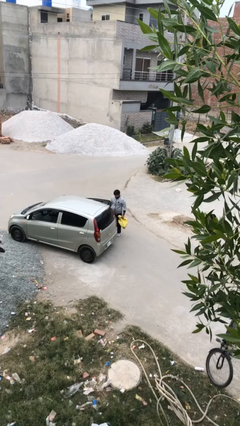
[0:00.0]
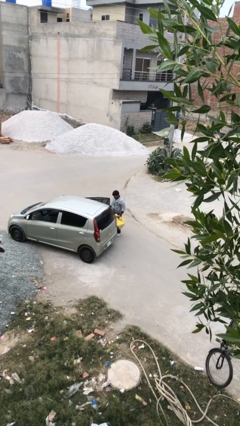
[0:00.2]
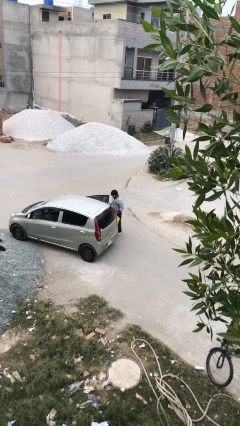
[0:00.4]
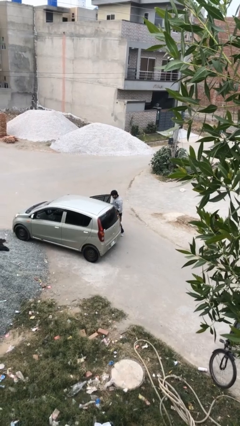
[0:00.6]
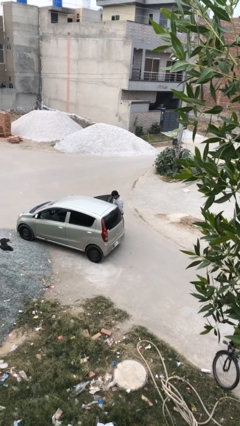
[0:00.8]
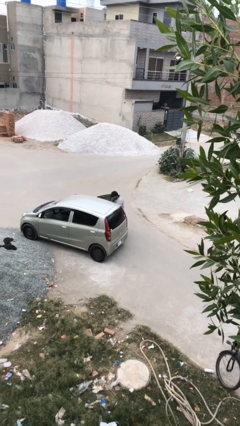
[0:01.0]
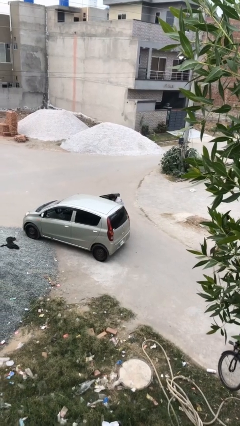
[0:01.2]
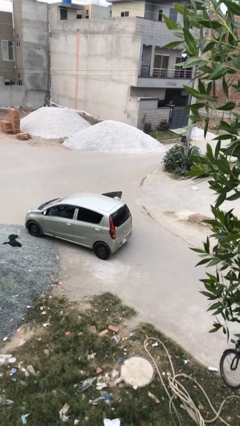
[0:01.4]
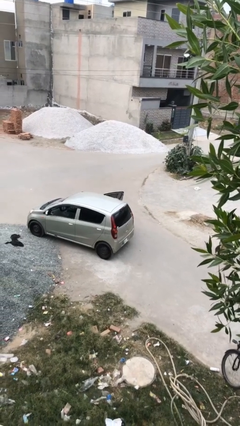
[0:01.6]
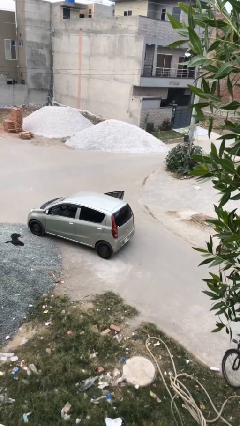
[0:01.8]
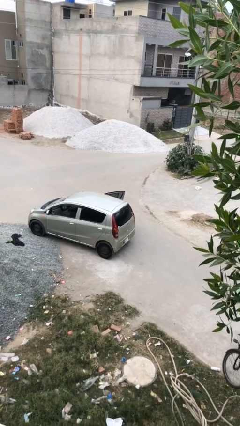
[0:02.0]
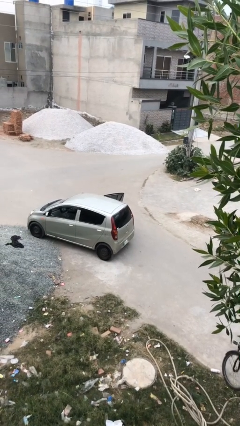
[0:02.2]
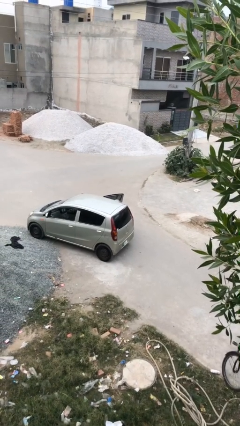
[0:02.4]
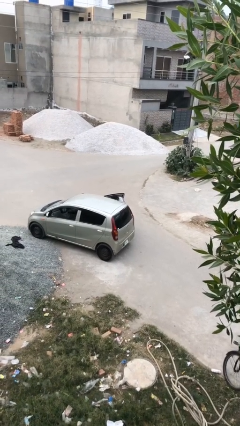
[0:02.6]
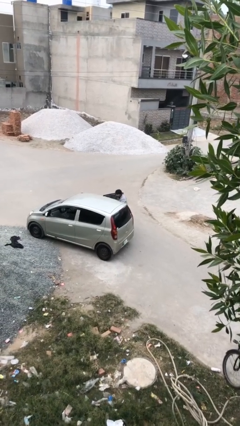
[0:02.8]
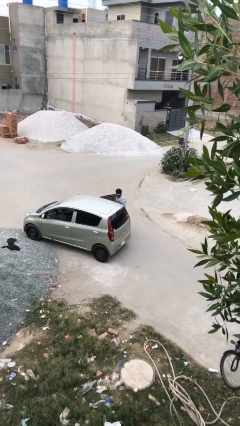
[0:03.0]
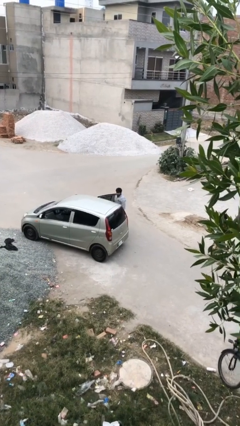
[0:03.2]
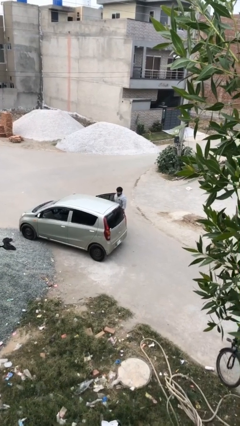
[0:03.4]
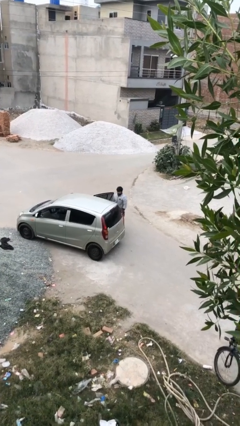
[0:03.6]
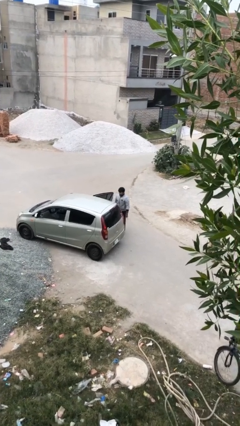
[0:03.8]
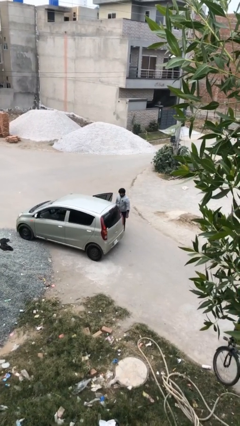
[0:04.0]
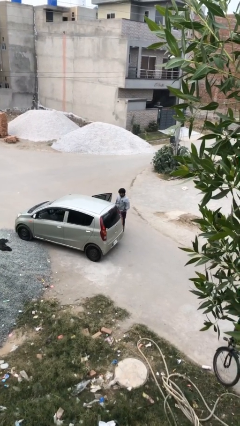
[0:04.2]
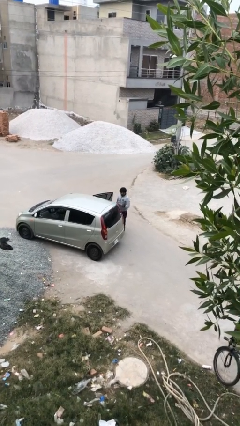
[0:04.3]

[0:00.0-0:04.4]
person loads car

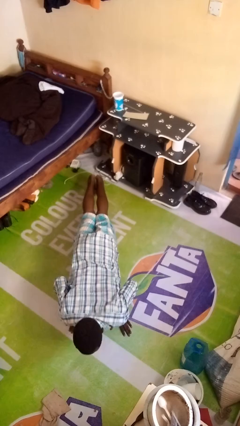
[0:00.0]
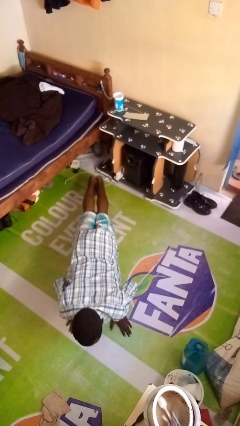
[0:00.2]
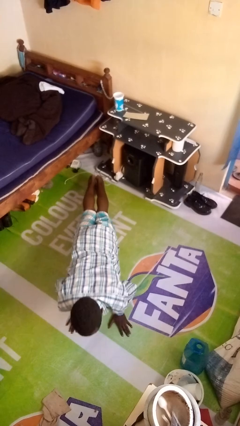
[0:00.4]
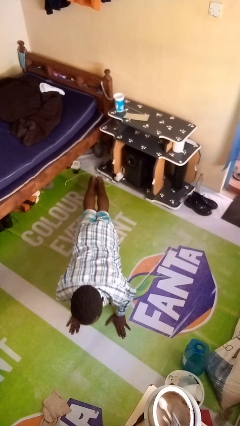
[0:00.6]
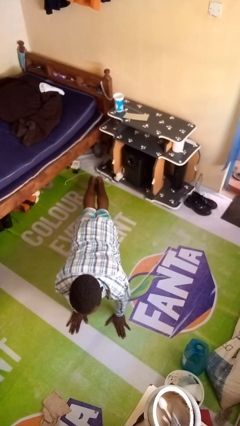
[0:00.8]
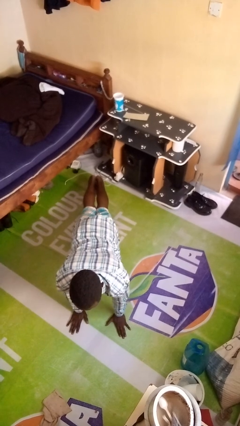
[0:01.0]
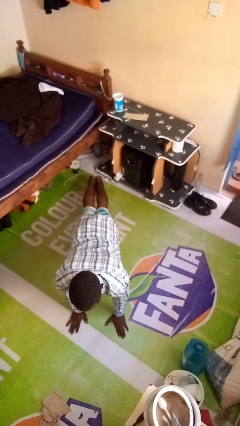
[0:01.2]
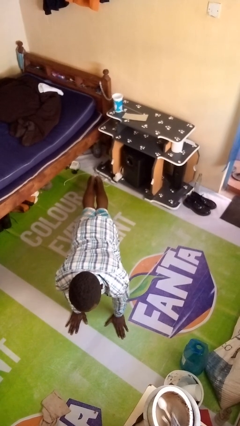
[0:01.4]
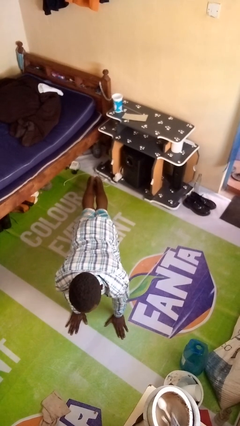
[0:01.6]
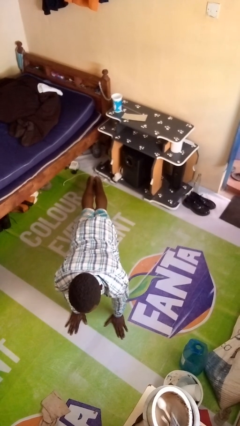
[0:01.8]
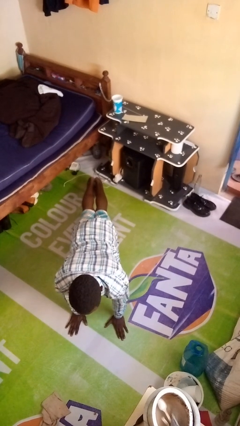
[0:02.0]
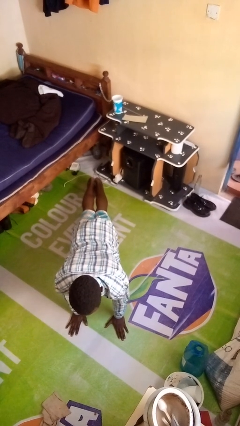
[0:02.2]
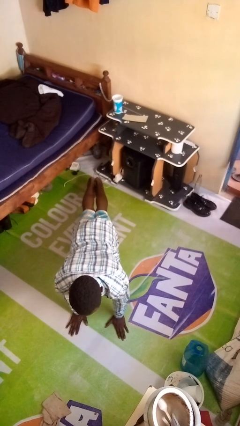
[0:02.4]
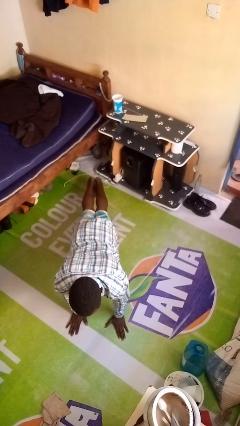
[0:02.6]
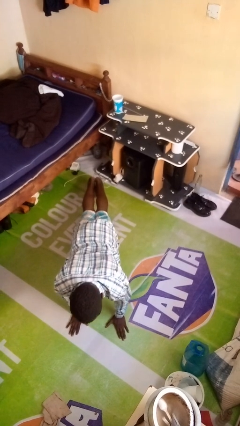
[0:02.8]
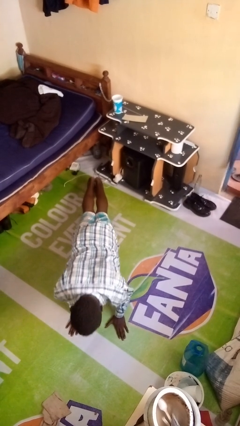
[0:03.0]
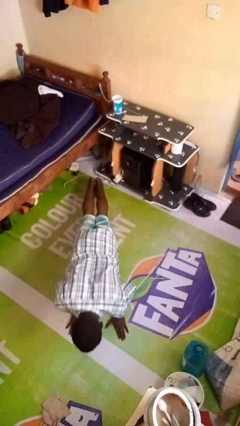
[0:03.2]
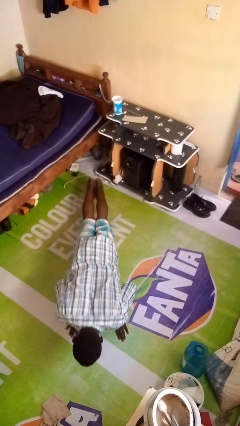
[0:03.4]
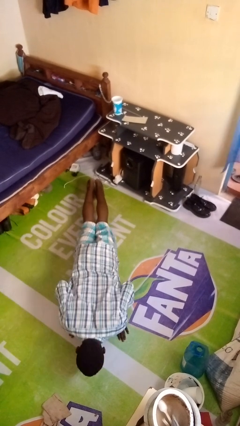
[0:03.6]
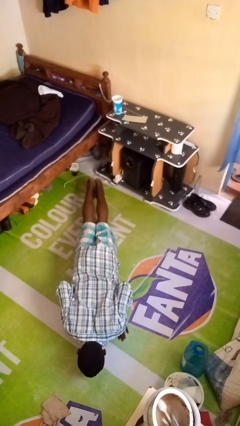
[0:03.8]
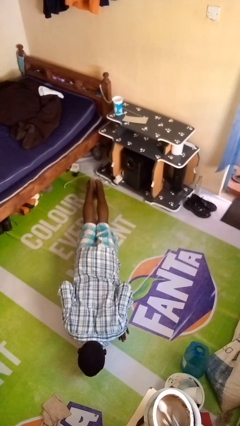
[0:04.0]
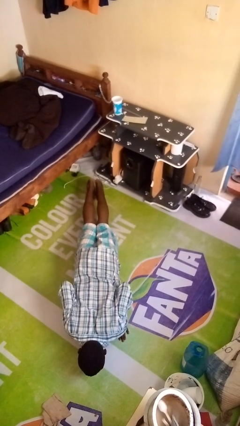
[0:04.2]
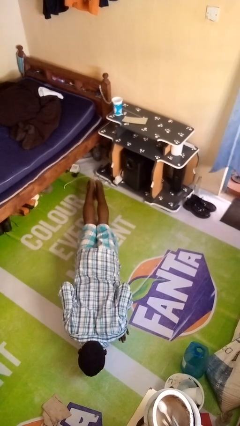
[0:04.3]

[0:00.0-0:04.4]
person exercises with pushup

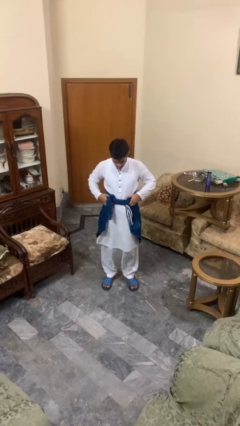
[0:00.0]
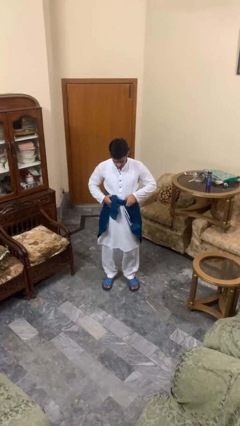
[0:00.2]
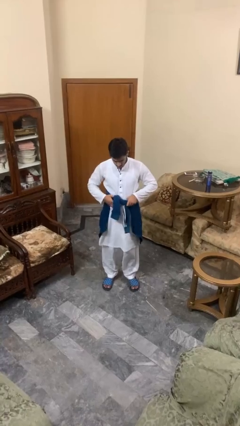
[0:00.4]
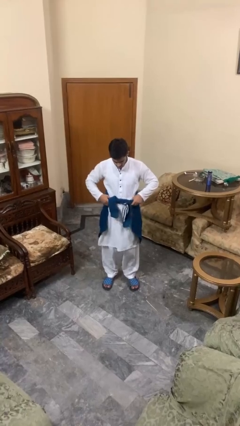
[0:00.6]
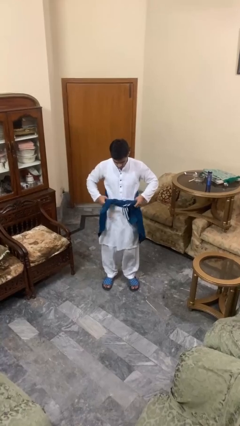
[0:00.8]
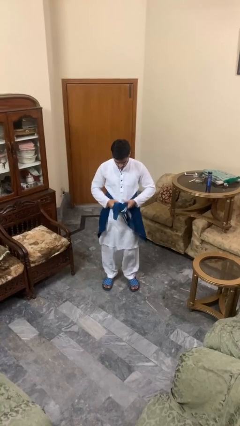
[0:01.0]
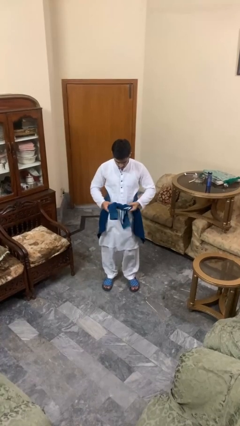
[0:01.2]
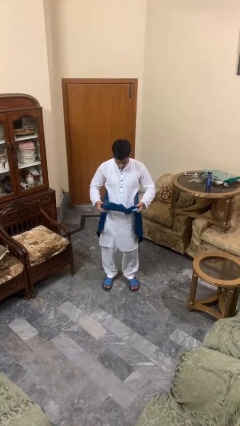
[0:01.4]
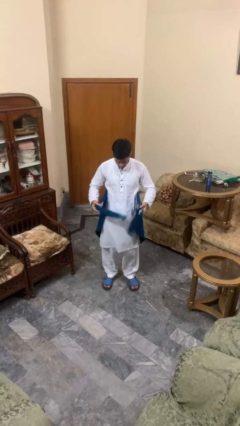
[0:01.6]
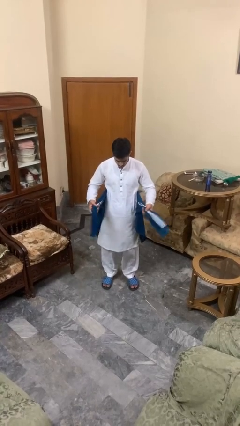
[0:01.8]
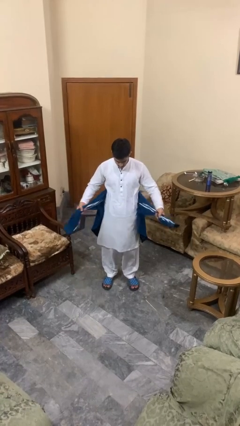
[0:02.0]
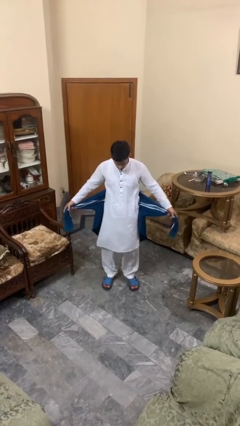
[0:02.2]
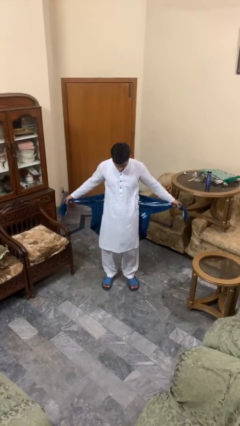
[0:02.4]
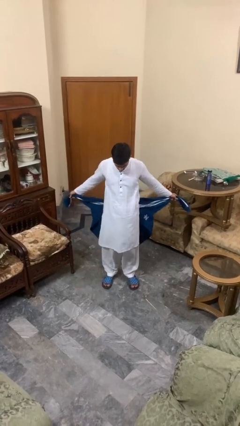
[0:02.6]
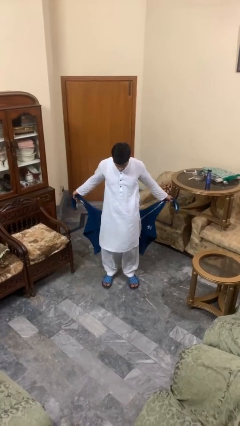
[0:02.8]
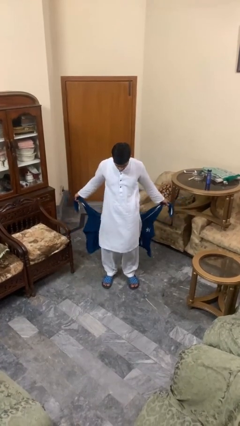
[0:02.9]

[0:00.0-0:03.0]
person unties jacket around waist

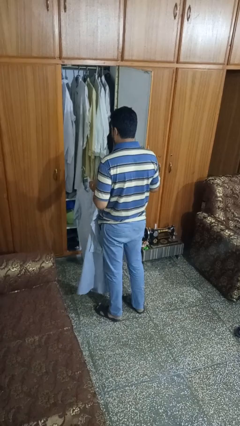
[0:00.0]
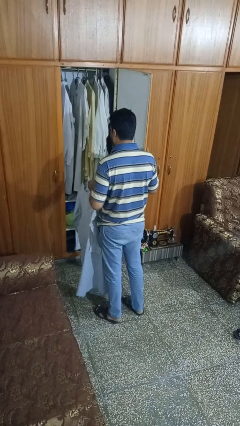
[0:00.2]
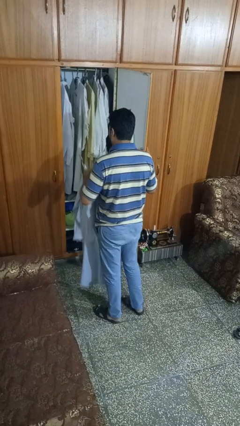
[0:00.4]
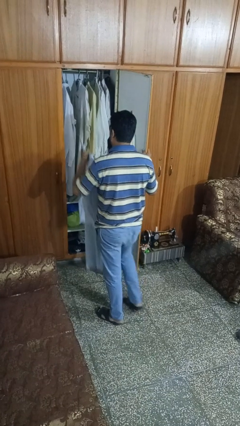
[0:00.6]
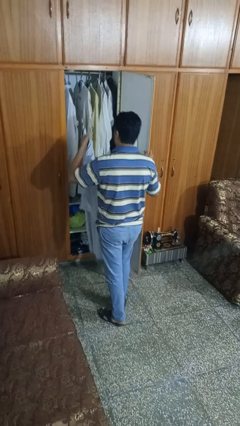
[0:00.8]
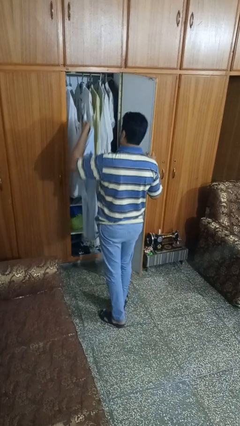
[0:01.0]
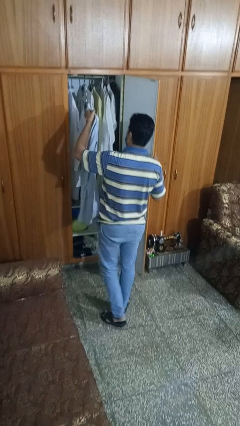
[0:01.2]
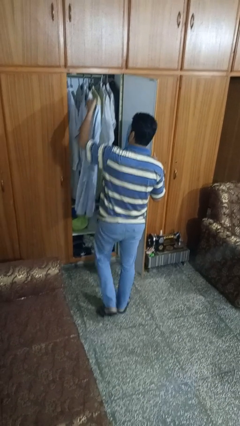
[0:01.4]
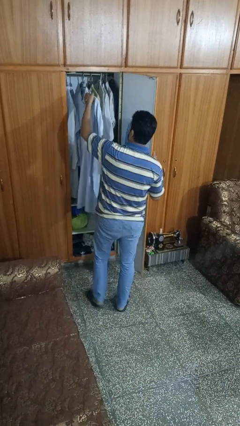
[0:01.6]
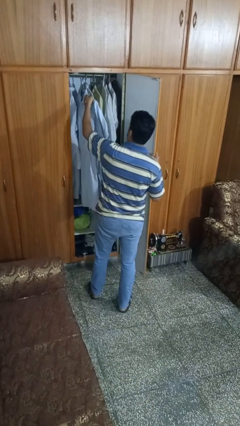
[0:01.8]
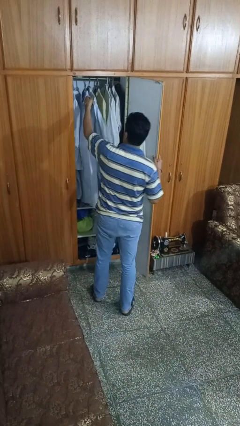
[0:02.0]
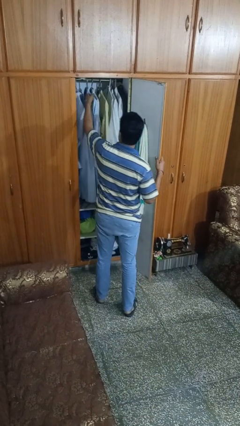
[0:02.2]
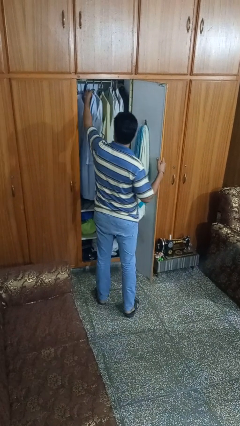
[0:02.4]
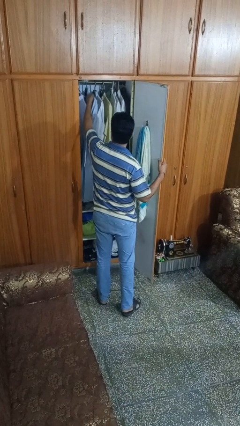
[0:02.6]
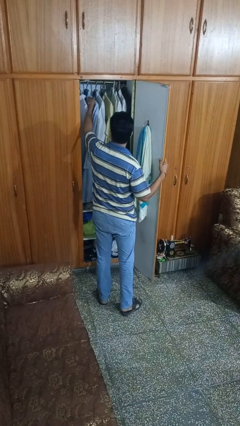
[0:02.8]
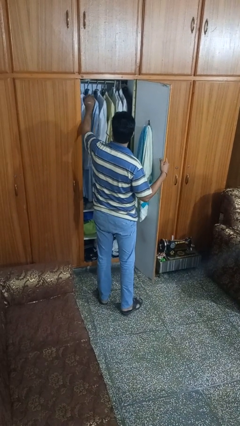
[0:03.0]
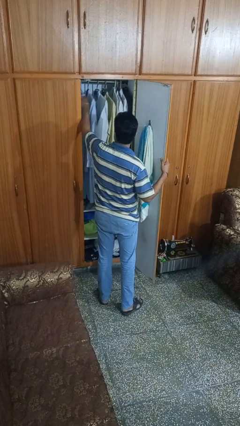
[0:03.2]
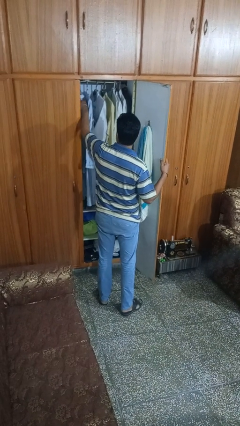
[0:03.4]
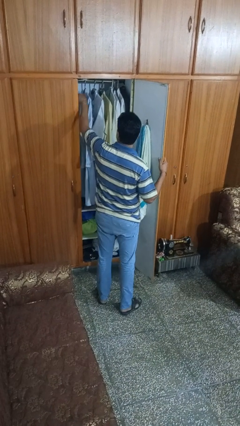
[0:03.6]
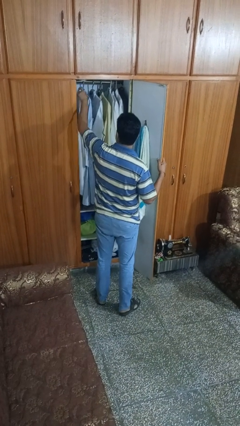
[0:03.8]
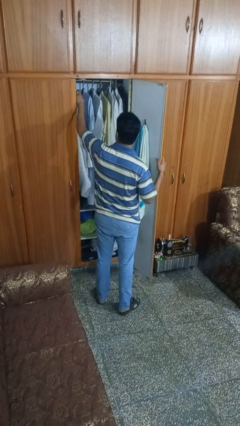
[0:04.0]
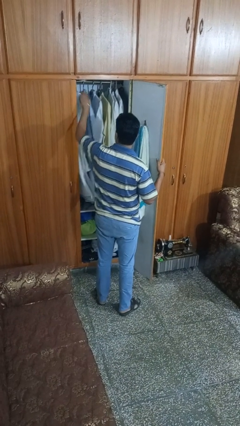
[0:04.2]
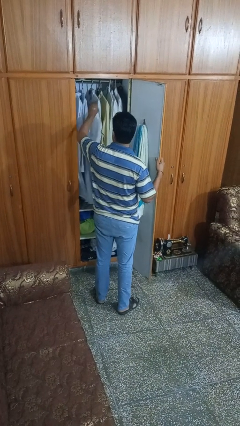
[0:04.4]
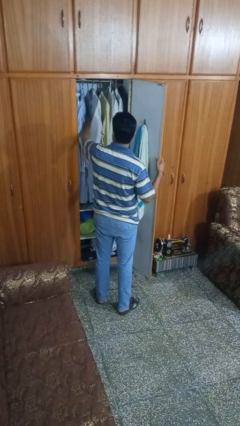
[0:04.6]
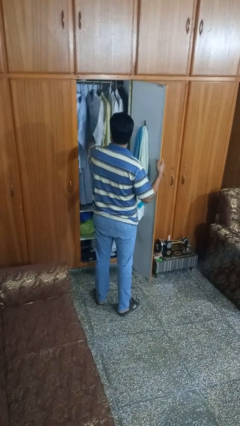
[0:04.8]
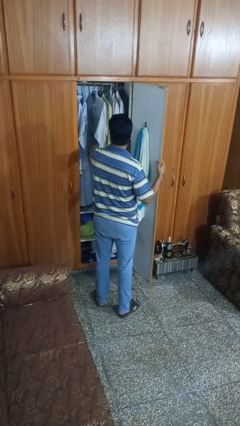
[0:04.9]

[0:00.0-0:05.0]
person puts clothes into dresser

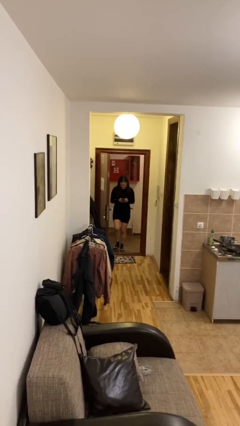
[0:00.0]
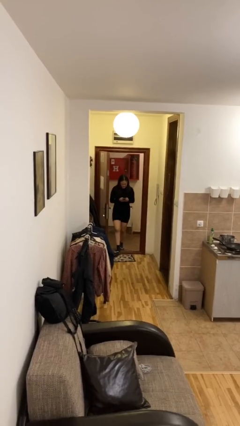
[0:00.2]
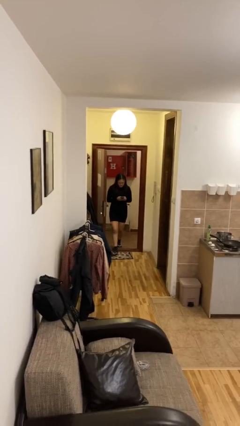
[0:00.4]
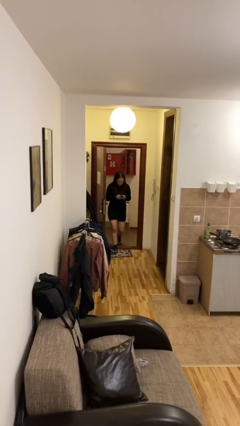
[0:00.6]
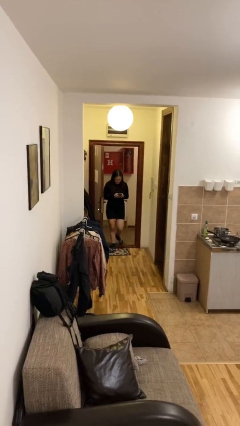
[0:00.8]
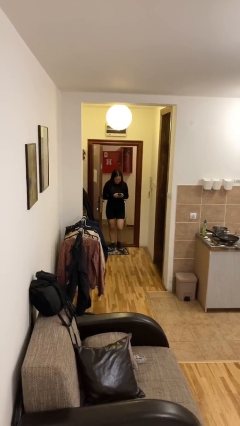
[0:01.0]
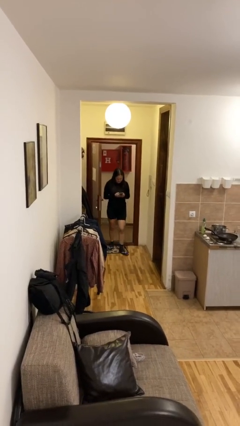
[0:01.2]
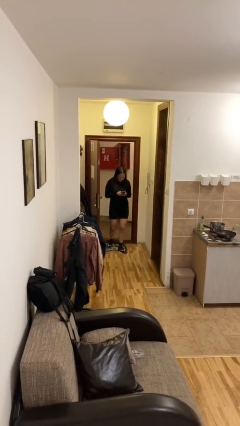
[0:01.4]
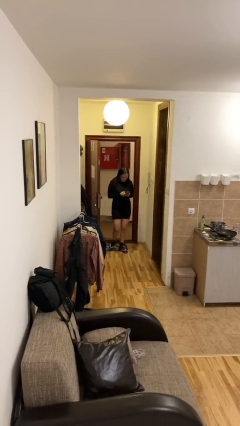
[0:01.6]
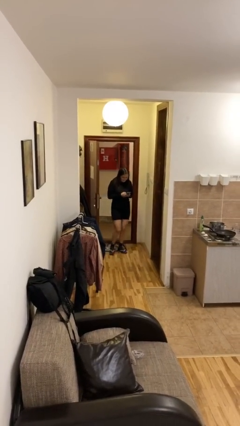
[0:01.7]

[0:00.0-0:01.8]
person enters scene through structure
